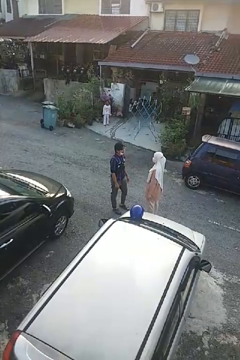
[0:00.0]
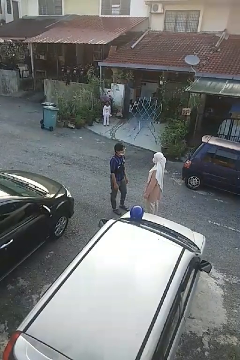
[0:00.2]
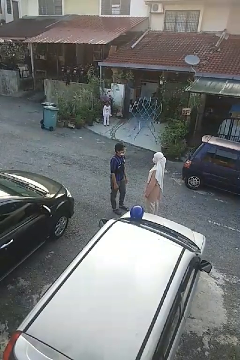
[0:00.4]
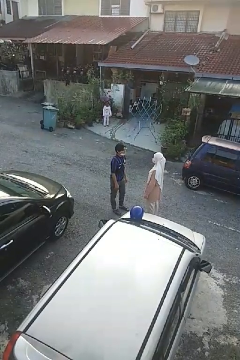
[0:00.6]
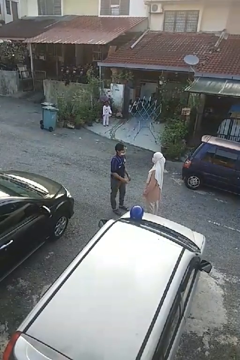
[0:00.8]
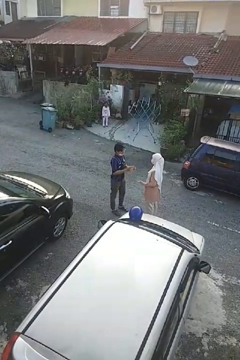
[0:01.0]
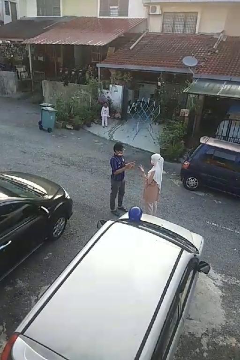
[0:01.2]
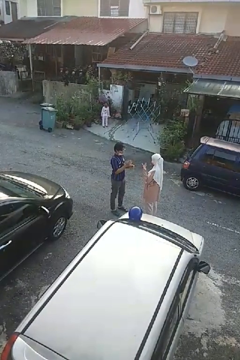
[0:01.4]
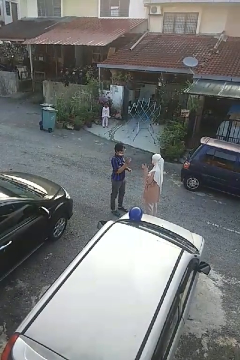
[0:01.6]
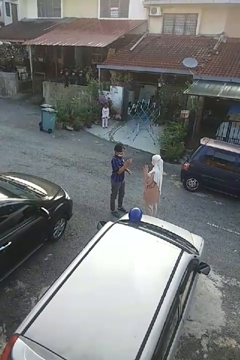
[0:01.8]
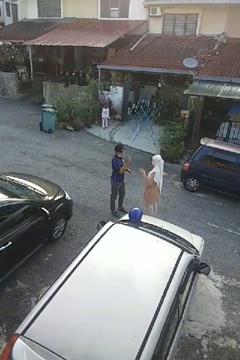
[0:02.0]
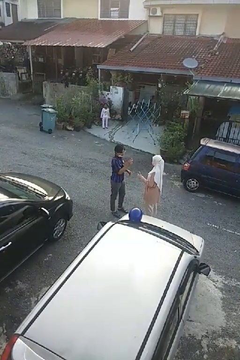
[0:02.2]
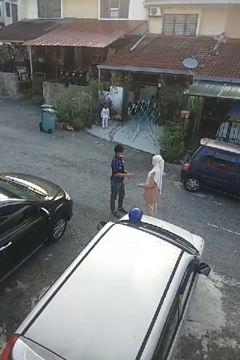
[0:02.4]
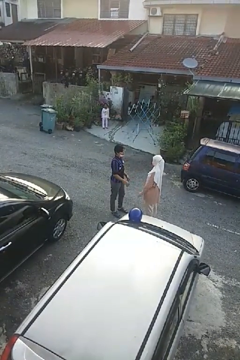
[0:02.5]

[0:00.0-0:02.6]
person talks to person

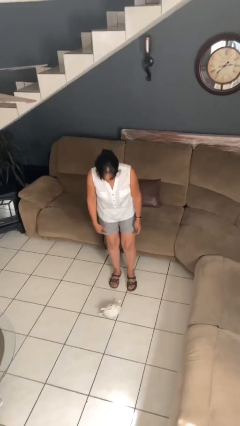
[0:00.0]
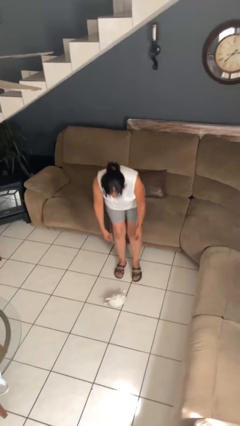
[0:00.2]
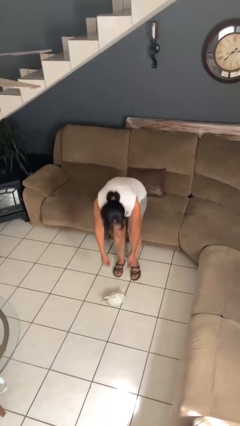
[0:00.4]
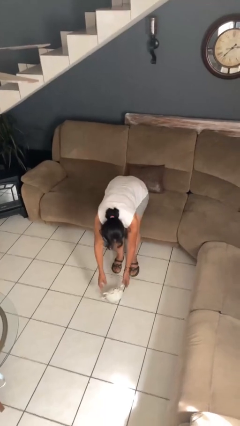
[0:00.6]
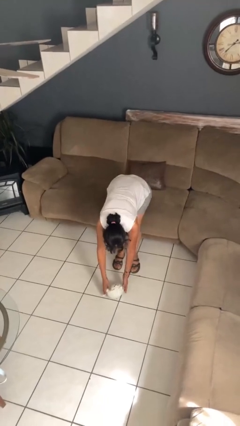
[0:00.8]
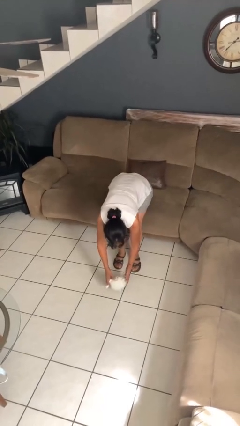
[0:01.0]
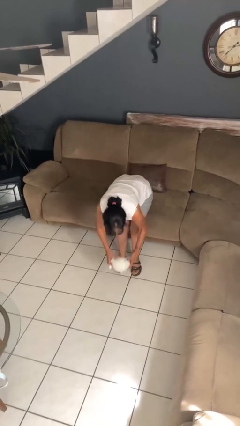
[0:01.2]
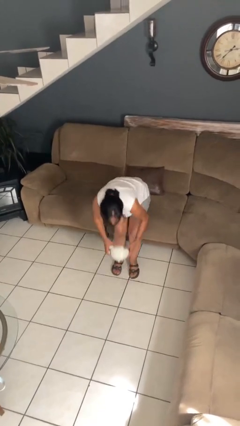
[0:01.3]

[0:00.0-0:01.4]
person picks up object from floor

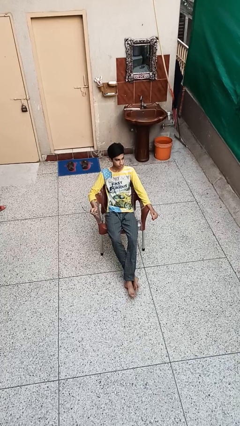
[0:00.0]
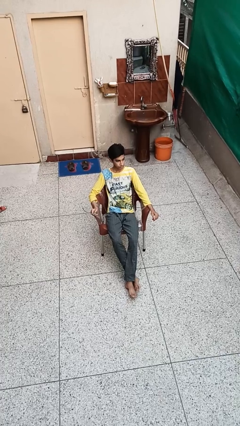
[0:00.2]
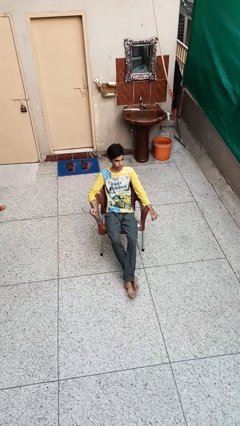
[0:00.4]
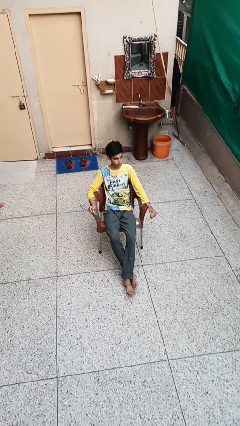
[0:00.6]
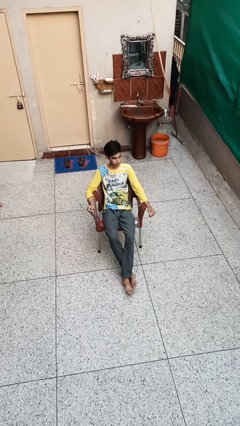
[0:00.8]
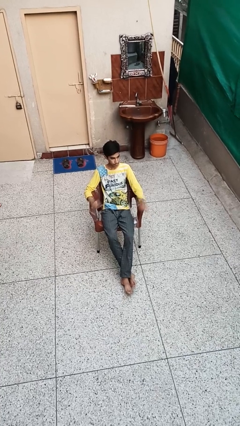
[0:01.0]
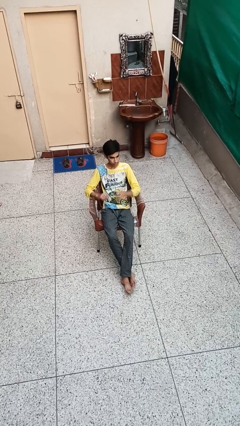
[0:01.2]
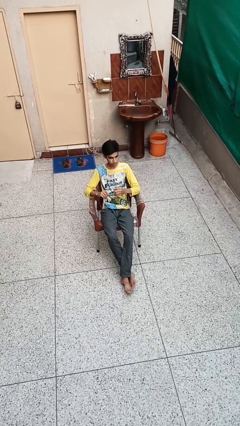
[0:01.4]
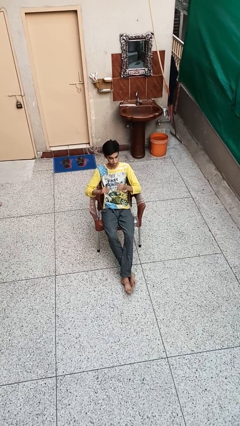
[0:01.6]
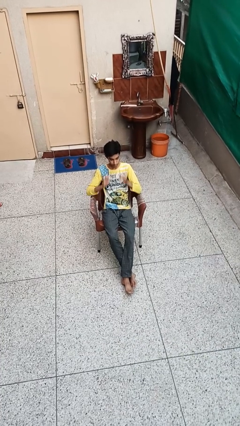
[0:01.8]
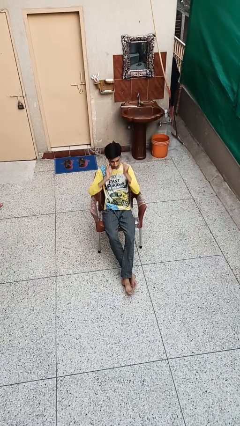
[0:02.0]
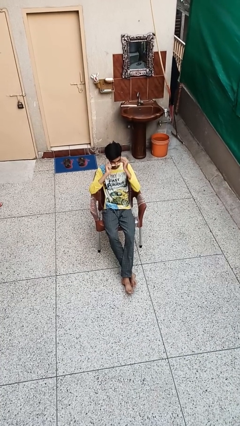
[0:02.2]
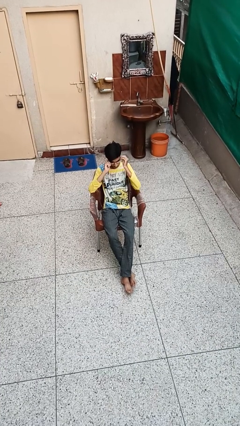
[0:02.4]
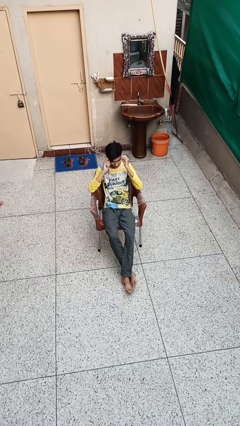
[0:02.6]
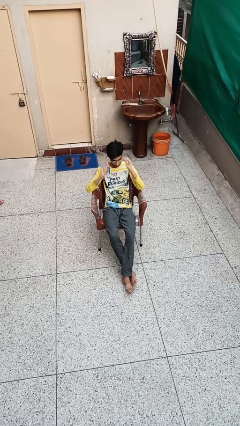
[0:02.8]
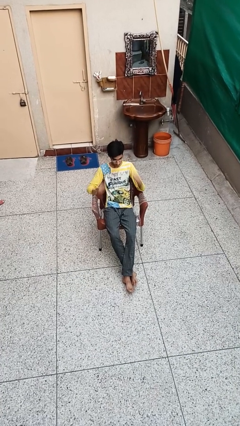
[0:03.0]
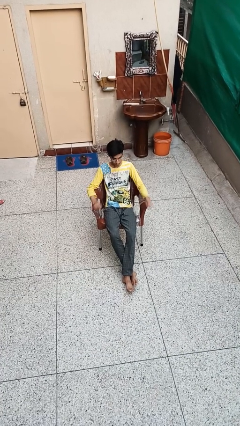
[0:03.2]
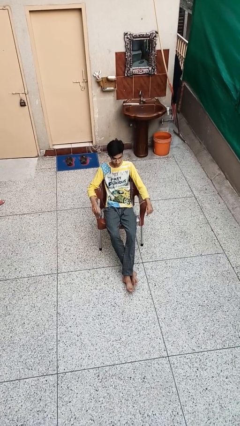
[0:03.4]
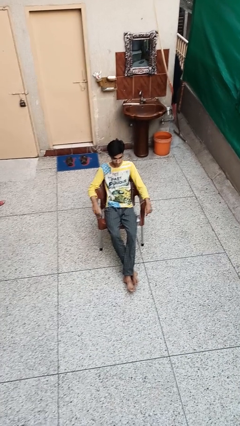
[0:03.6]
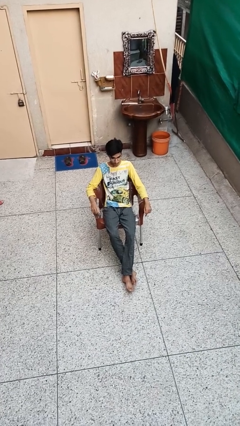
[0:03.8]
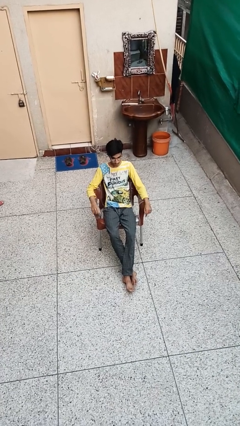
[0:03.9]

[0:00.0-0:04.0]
person puts on glasses

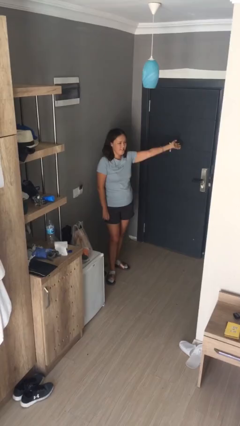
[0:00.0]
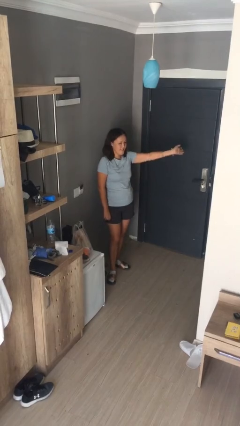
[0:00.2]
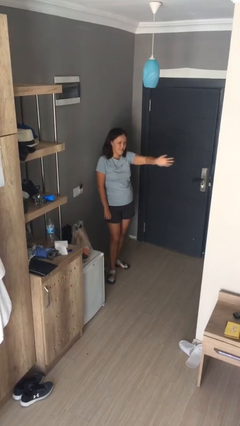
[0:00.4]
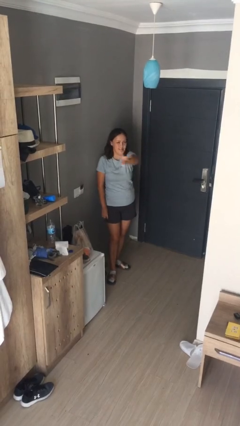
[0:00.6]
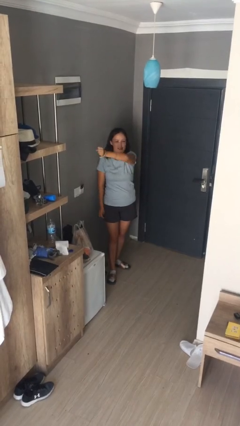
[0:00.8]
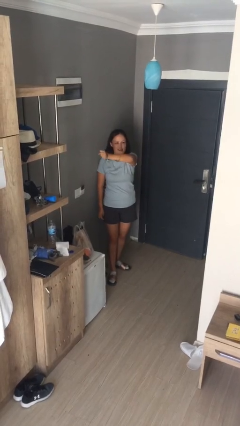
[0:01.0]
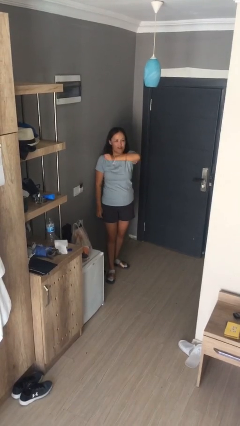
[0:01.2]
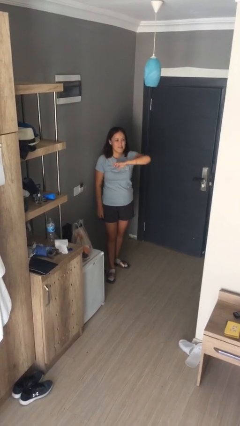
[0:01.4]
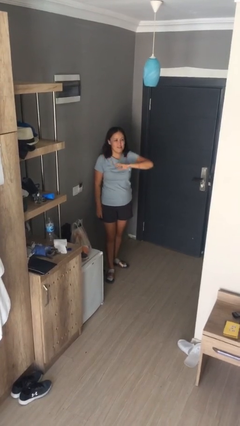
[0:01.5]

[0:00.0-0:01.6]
person gestures swipe right

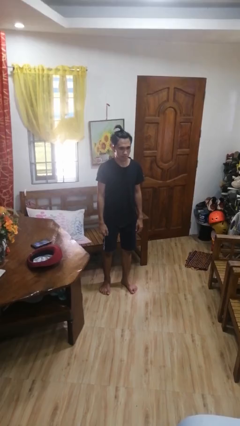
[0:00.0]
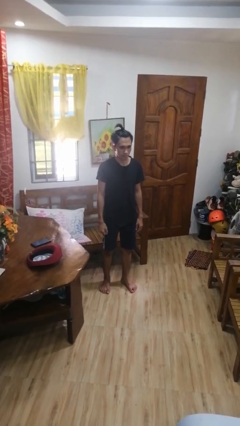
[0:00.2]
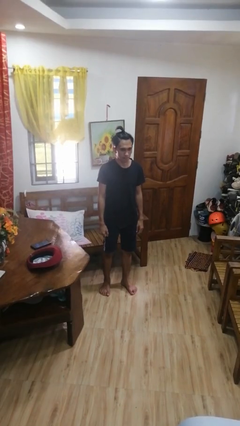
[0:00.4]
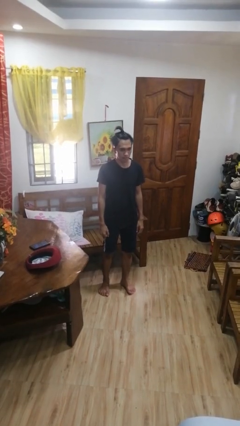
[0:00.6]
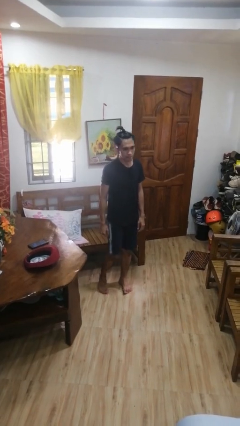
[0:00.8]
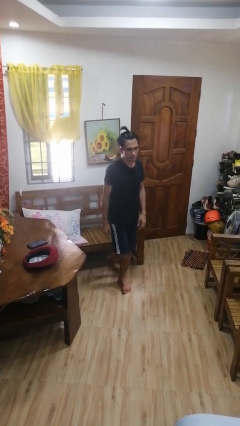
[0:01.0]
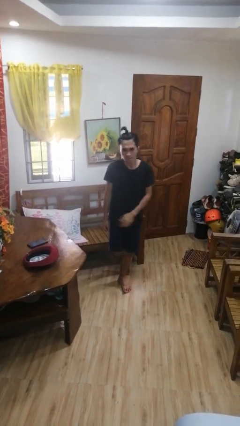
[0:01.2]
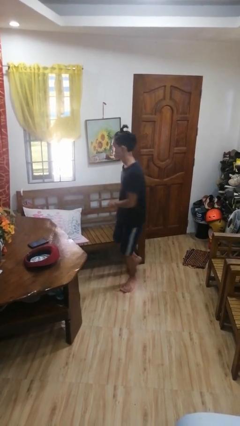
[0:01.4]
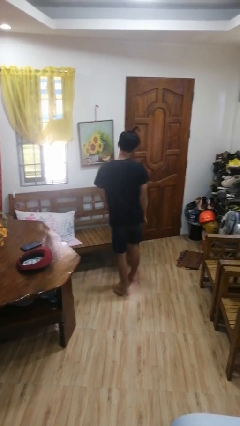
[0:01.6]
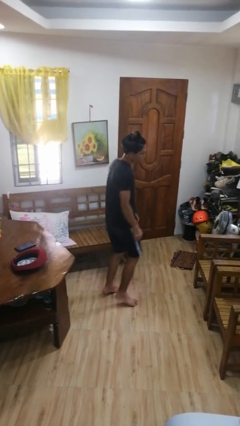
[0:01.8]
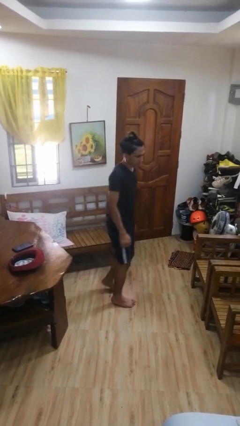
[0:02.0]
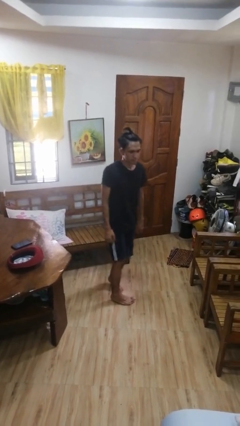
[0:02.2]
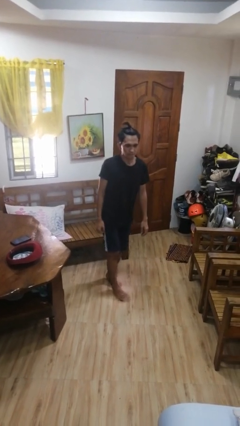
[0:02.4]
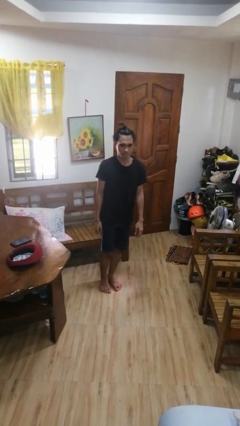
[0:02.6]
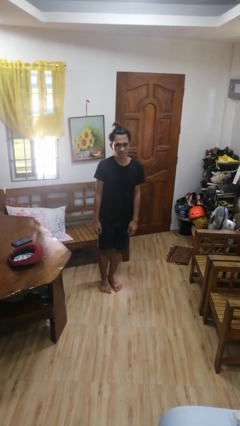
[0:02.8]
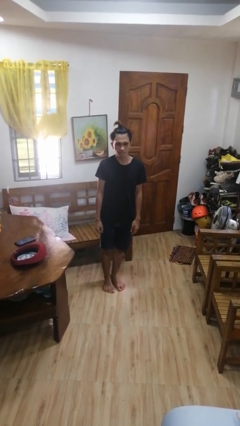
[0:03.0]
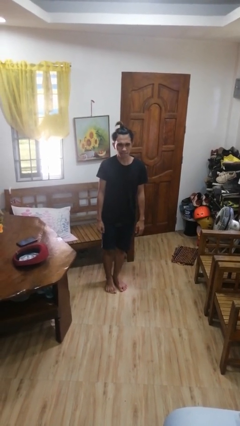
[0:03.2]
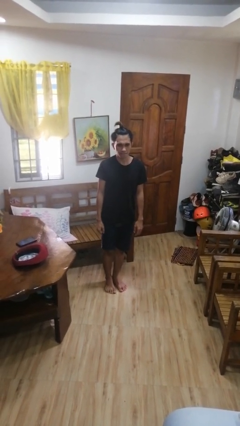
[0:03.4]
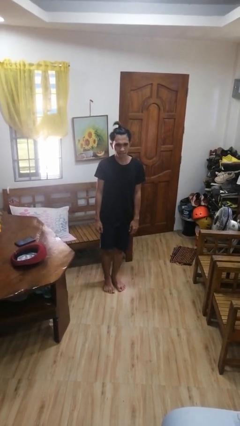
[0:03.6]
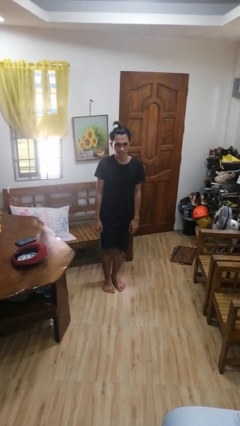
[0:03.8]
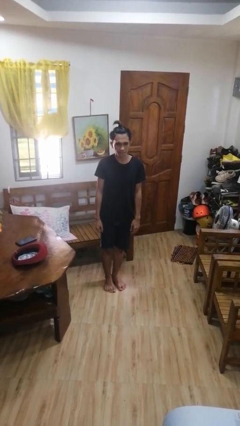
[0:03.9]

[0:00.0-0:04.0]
person twirls

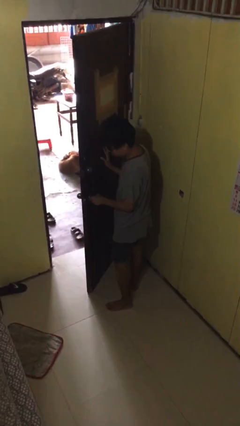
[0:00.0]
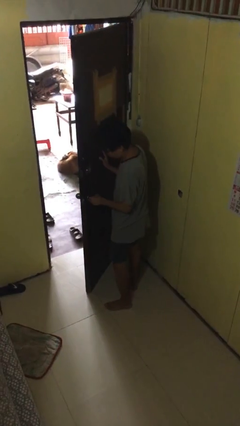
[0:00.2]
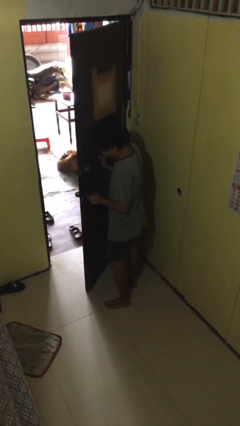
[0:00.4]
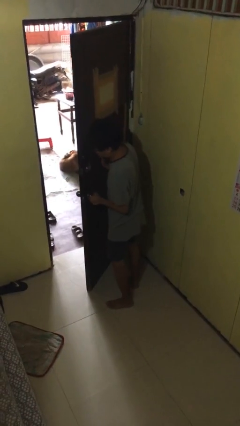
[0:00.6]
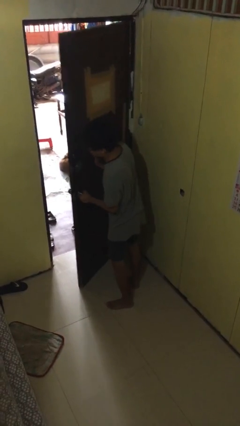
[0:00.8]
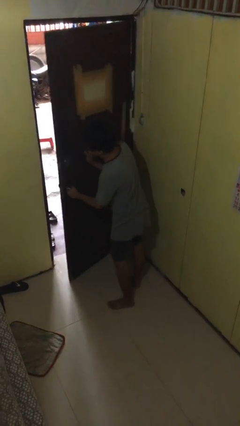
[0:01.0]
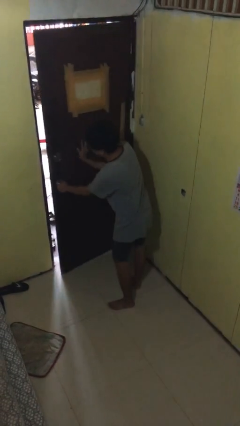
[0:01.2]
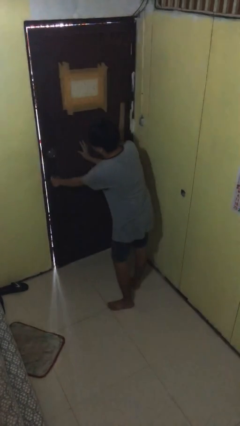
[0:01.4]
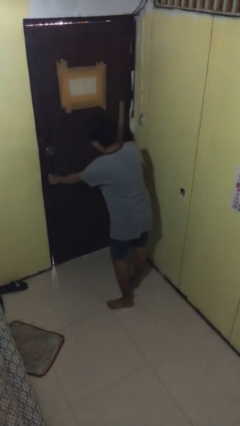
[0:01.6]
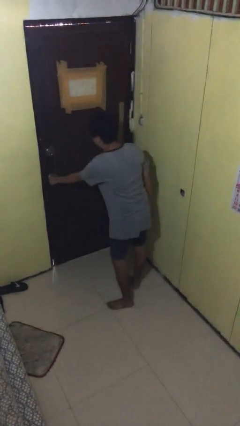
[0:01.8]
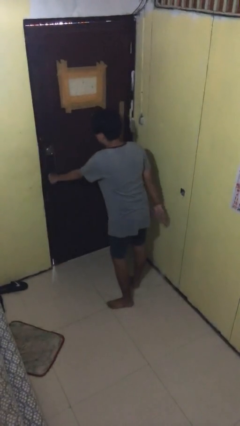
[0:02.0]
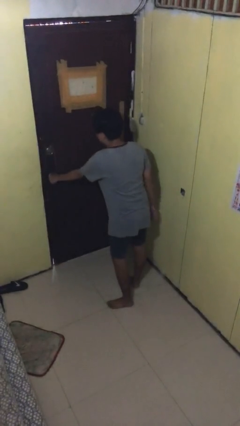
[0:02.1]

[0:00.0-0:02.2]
person closes facility door

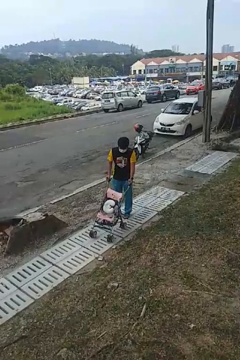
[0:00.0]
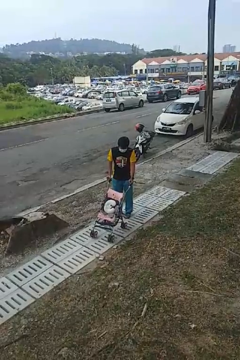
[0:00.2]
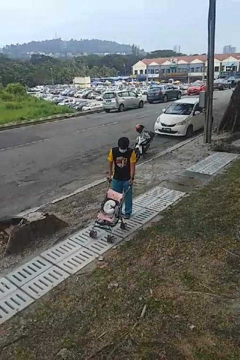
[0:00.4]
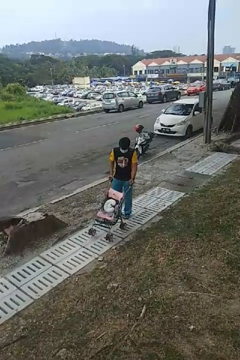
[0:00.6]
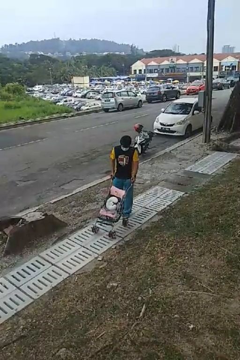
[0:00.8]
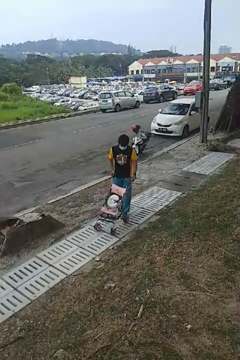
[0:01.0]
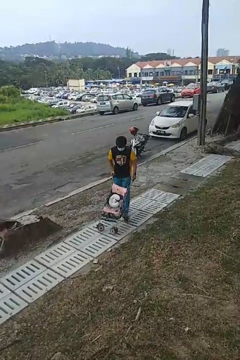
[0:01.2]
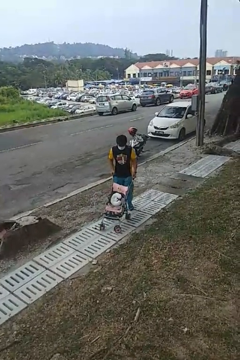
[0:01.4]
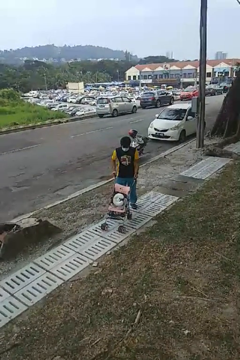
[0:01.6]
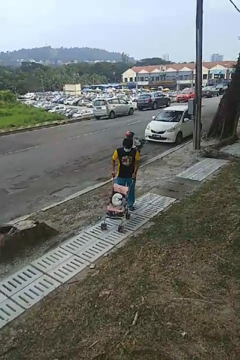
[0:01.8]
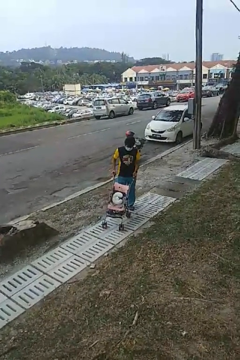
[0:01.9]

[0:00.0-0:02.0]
person pulls wheeled cart
